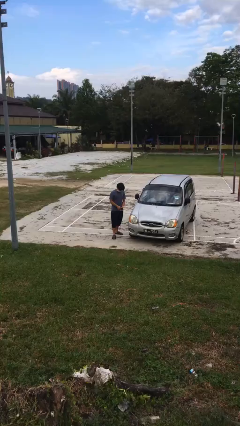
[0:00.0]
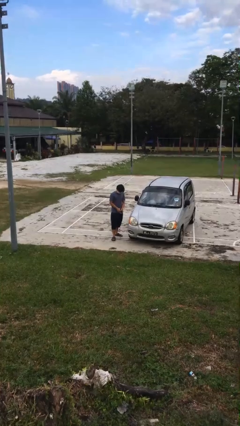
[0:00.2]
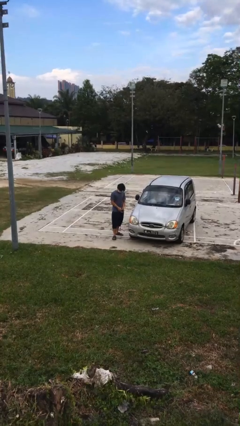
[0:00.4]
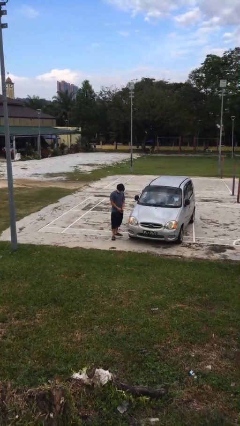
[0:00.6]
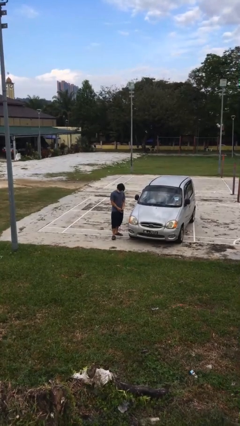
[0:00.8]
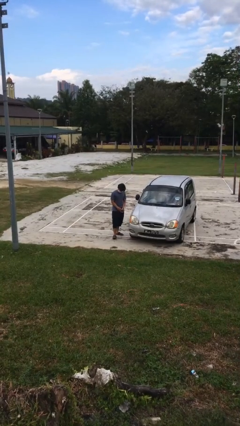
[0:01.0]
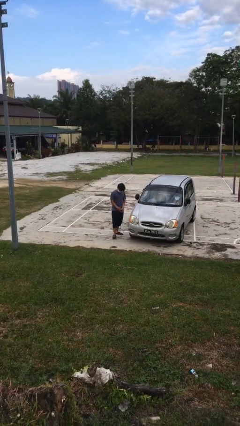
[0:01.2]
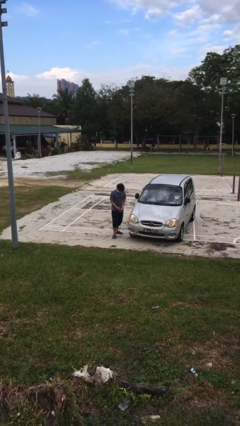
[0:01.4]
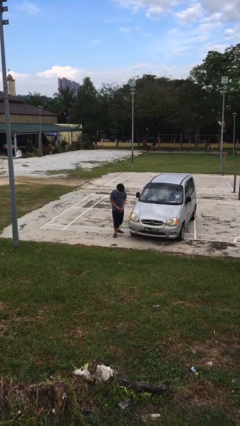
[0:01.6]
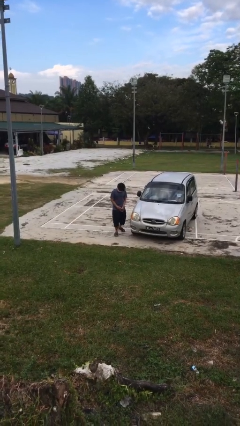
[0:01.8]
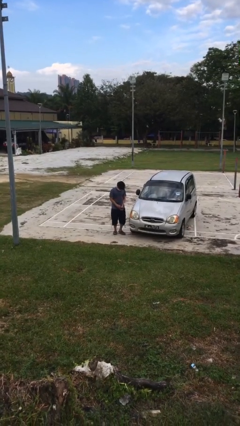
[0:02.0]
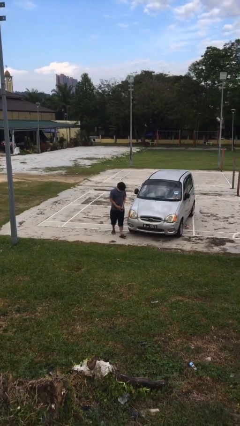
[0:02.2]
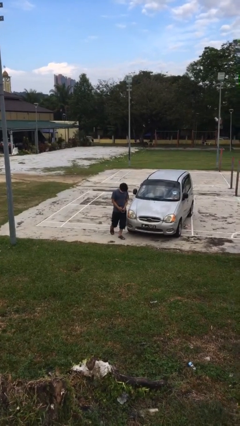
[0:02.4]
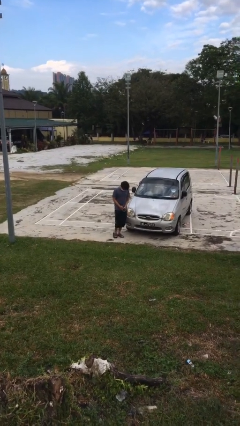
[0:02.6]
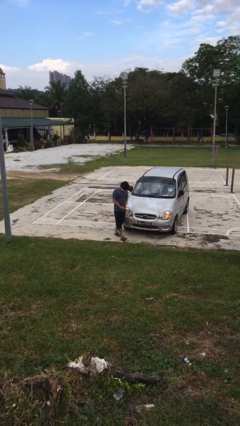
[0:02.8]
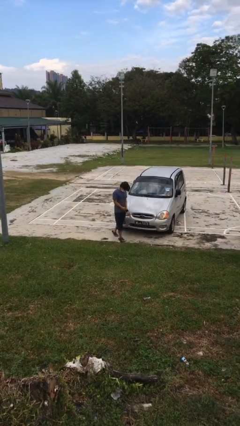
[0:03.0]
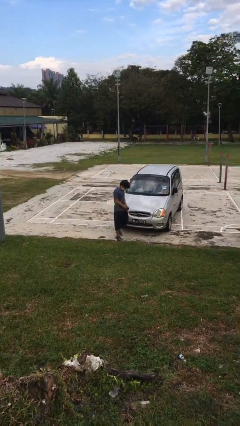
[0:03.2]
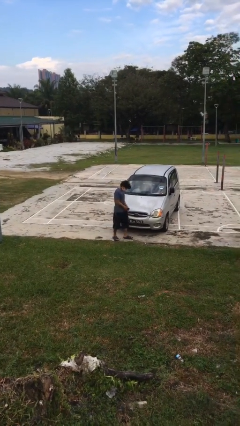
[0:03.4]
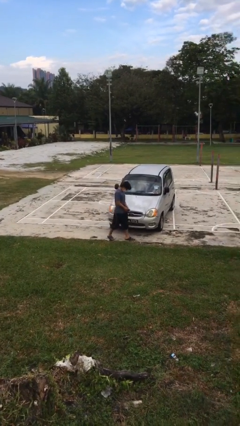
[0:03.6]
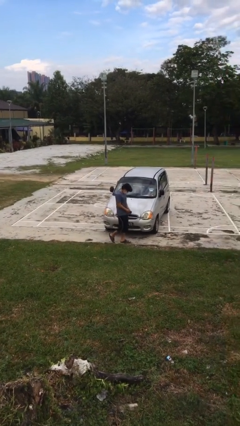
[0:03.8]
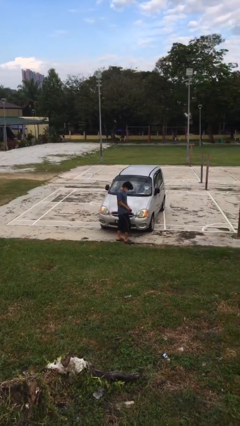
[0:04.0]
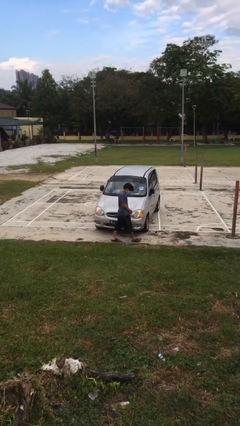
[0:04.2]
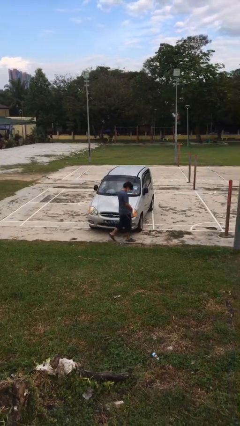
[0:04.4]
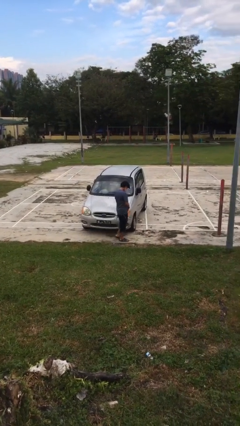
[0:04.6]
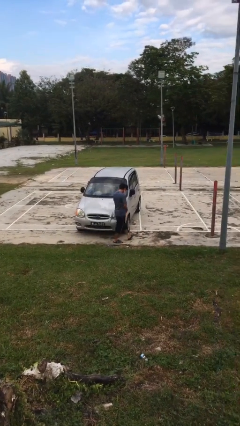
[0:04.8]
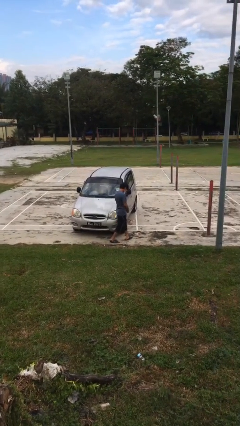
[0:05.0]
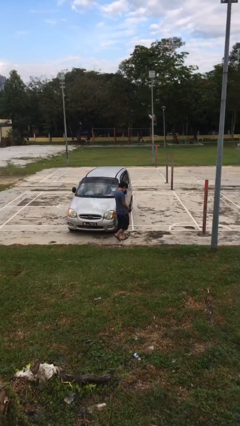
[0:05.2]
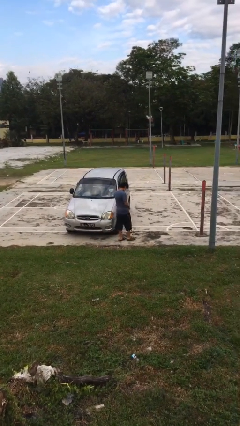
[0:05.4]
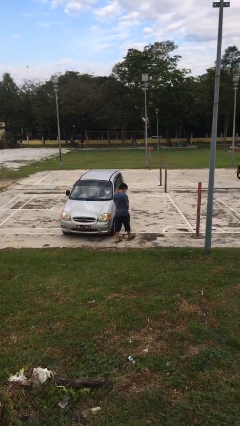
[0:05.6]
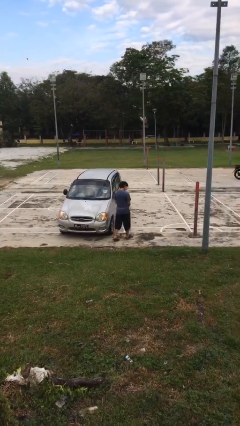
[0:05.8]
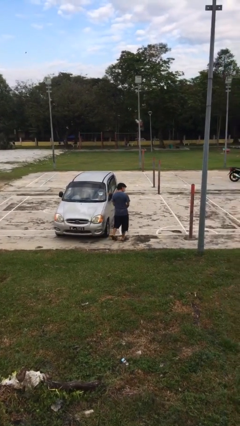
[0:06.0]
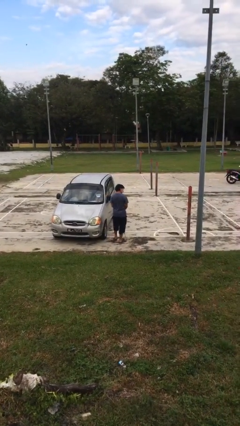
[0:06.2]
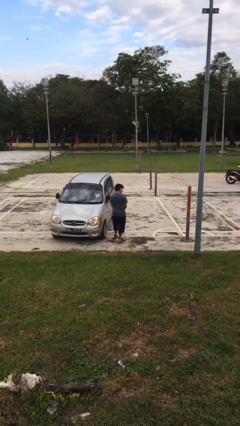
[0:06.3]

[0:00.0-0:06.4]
person walks around car

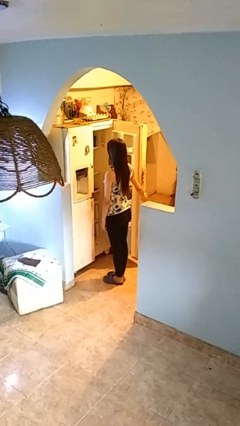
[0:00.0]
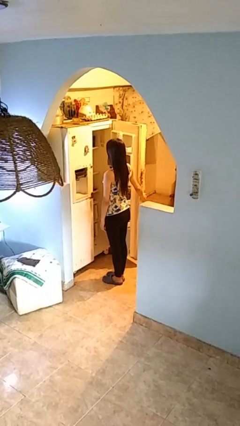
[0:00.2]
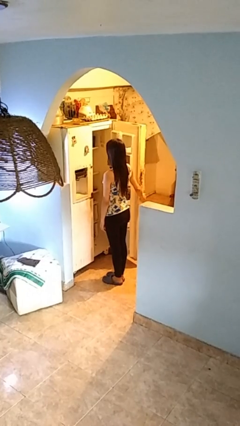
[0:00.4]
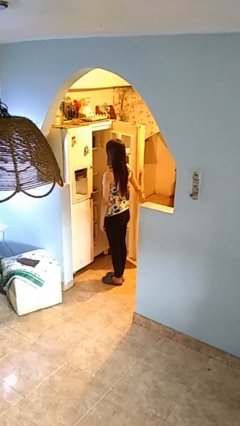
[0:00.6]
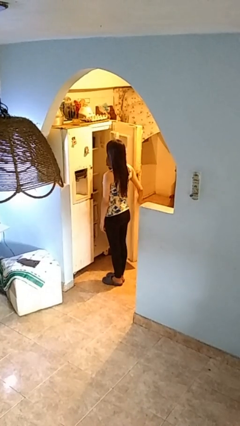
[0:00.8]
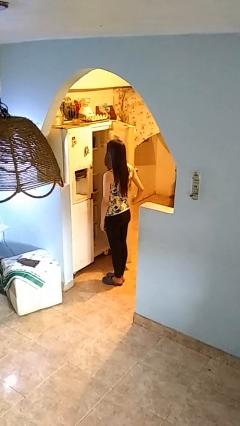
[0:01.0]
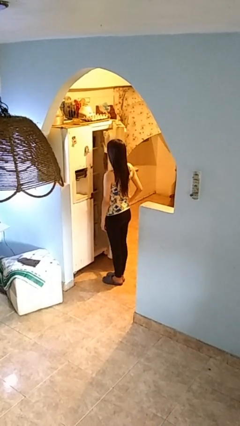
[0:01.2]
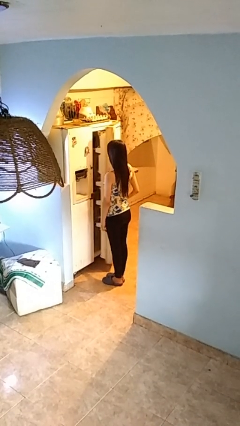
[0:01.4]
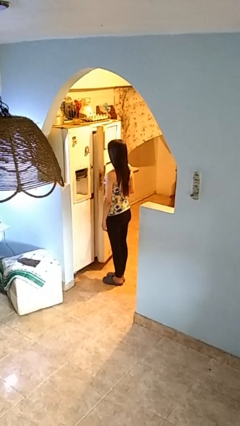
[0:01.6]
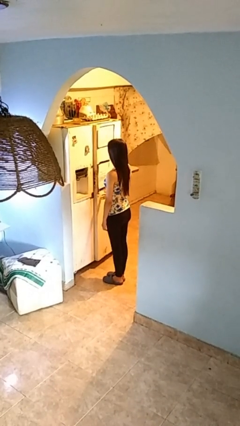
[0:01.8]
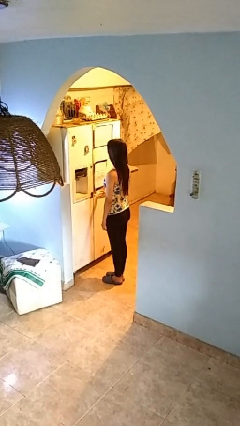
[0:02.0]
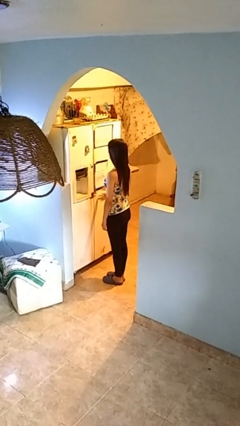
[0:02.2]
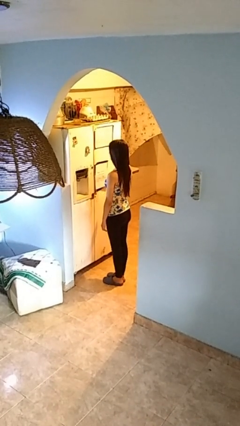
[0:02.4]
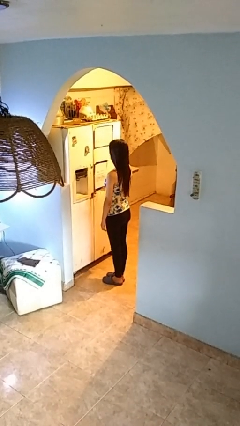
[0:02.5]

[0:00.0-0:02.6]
person closes refrigerator

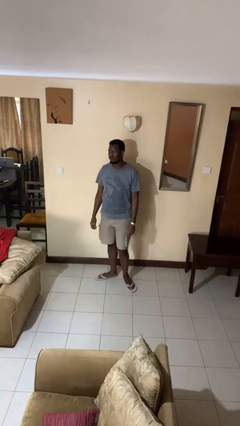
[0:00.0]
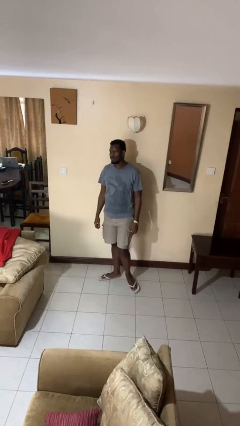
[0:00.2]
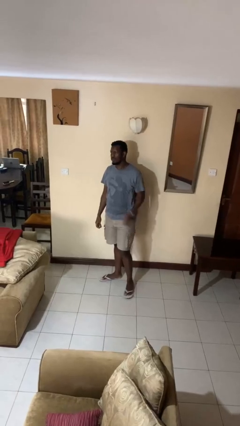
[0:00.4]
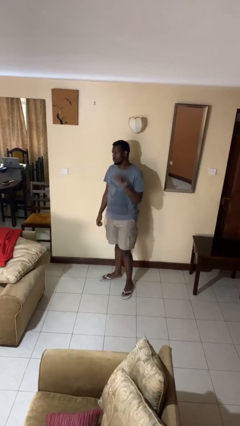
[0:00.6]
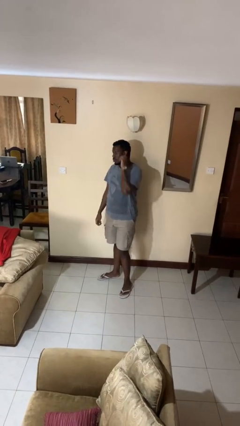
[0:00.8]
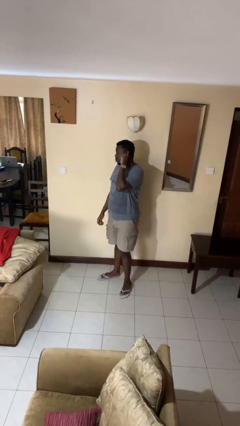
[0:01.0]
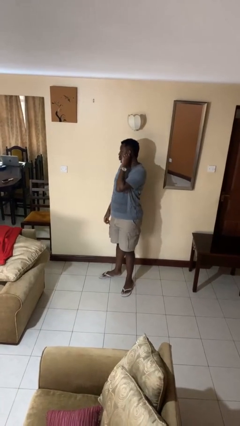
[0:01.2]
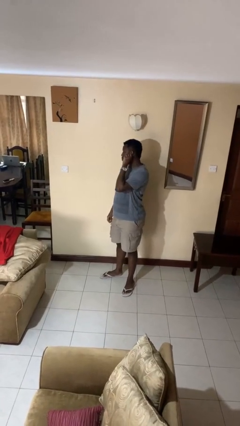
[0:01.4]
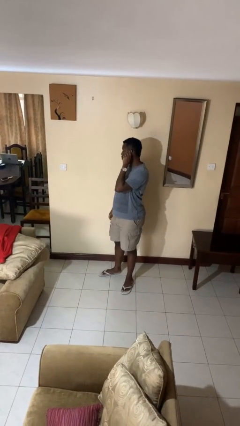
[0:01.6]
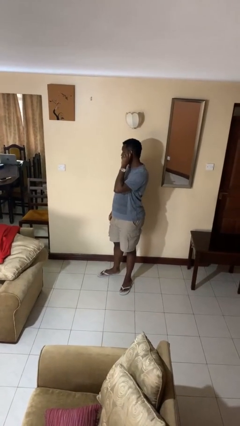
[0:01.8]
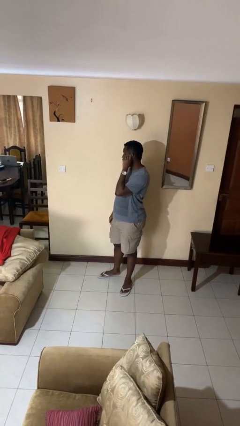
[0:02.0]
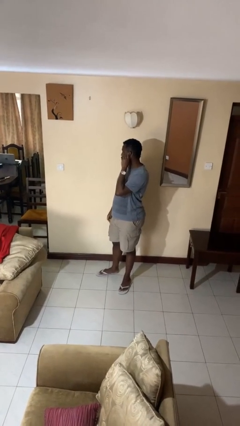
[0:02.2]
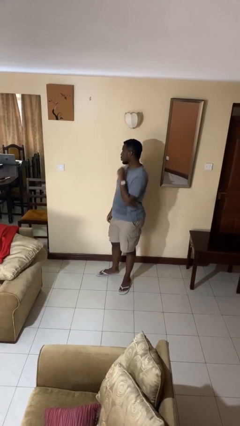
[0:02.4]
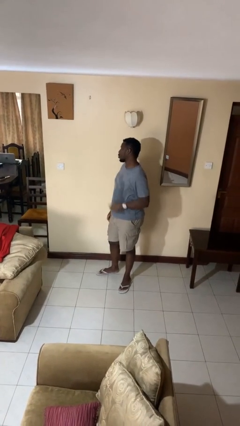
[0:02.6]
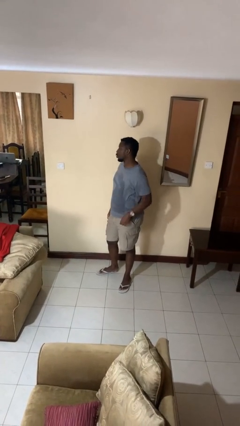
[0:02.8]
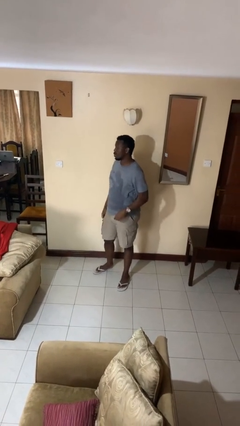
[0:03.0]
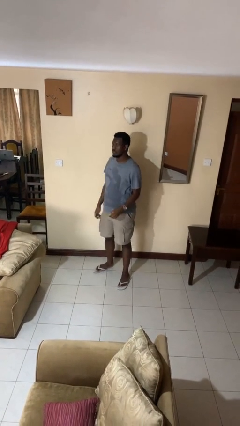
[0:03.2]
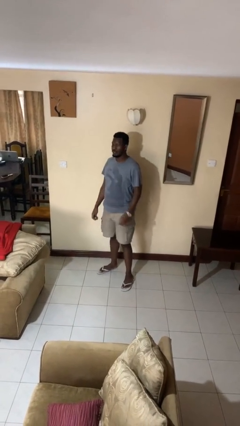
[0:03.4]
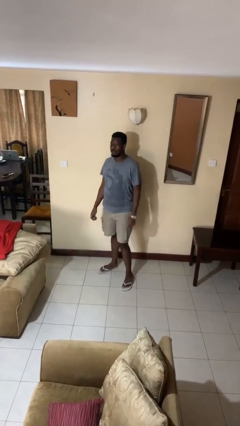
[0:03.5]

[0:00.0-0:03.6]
person touches earlobe

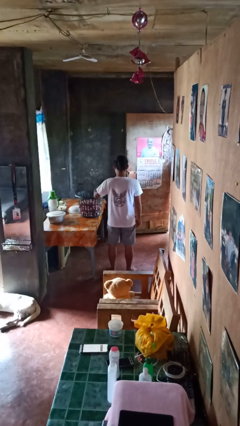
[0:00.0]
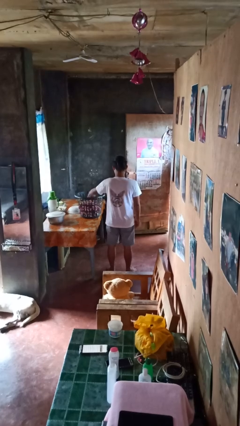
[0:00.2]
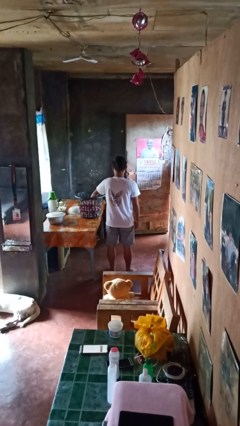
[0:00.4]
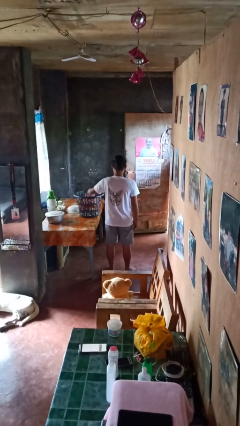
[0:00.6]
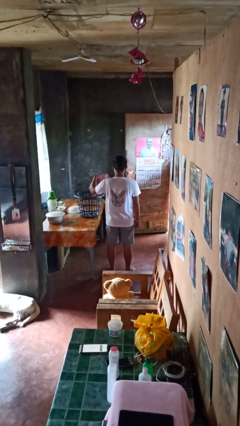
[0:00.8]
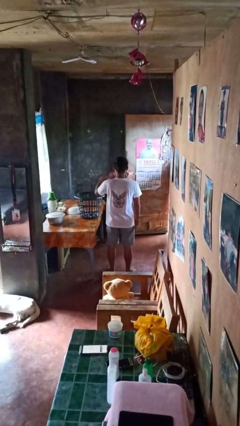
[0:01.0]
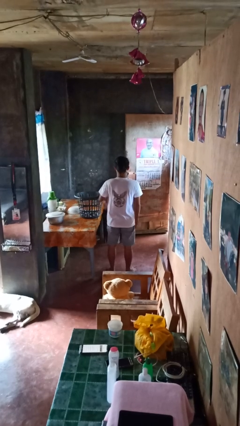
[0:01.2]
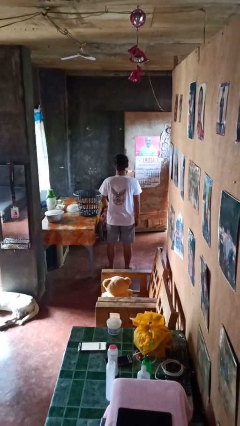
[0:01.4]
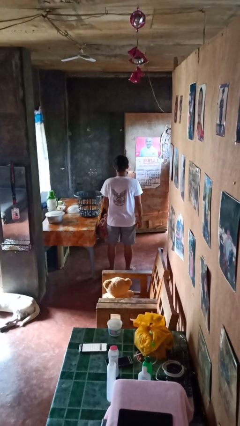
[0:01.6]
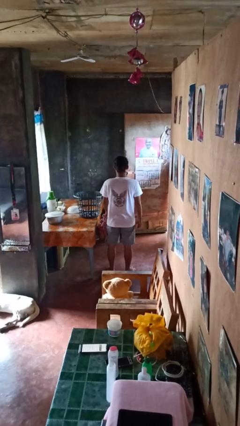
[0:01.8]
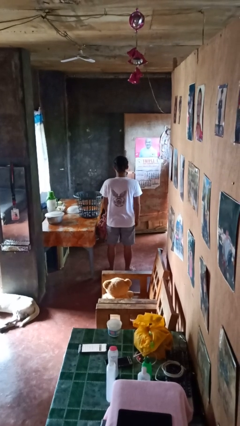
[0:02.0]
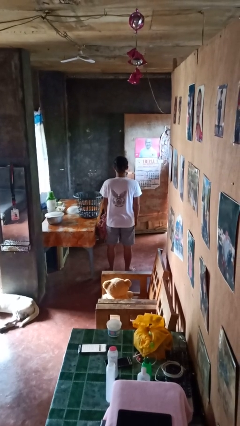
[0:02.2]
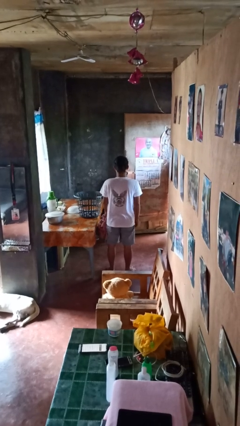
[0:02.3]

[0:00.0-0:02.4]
person takes object from basket

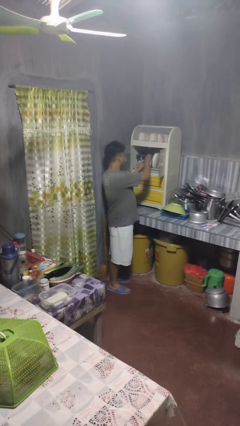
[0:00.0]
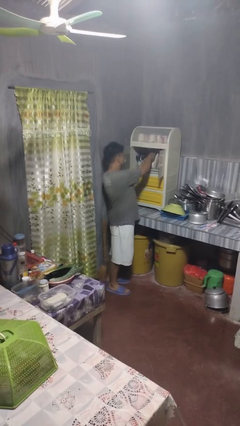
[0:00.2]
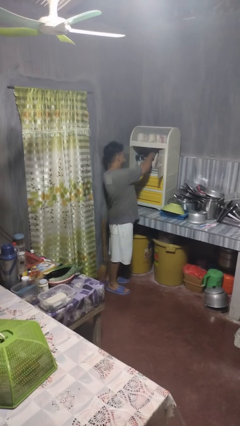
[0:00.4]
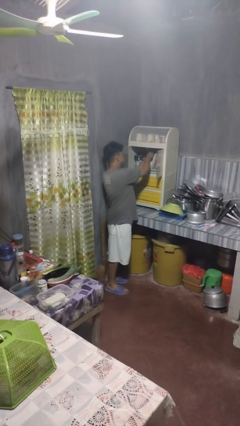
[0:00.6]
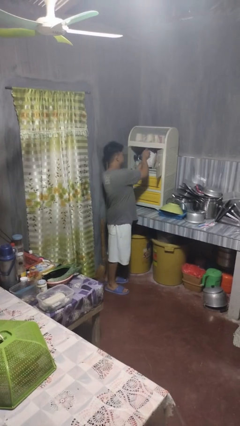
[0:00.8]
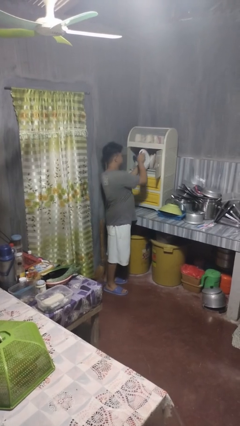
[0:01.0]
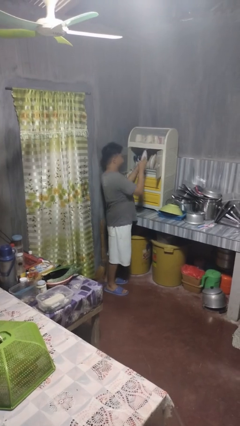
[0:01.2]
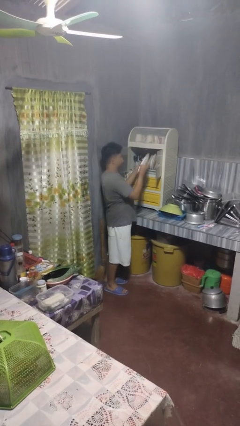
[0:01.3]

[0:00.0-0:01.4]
person takes object from cabinet

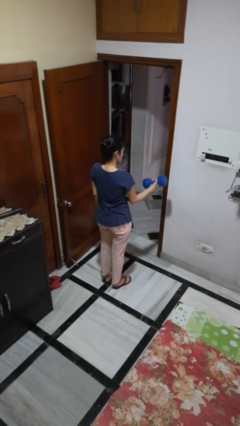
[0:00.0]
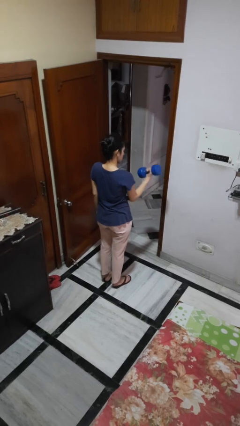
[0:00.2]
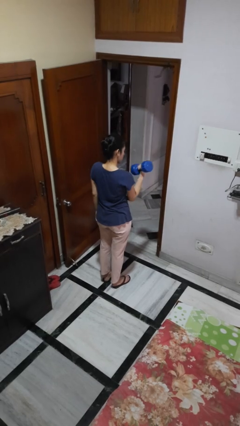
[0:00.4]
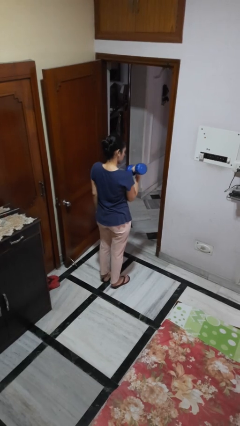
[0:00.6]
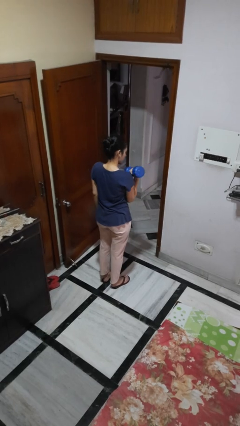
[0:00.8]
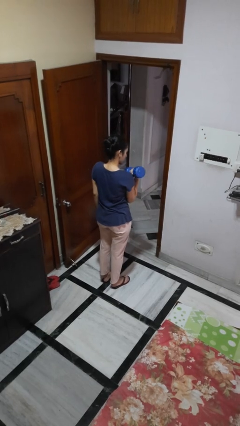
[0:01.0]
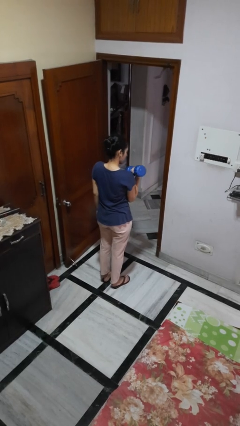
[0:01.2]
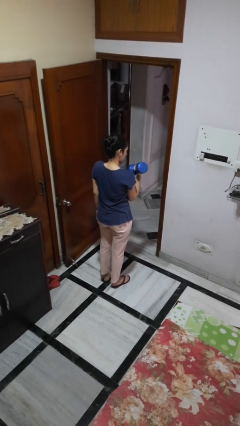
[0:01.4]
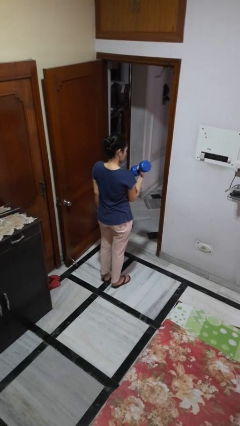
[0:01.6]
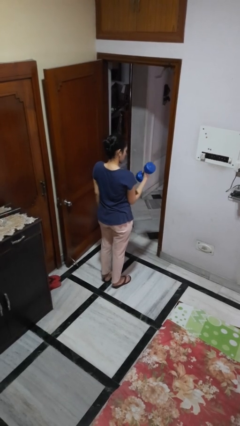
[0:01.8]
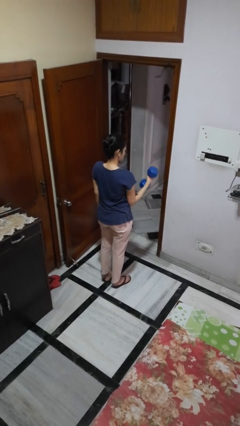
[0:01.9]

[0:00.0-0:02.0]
person lifts dumbbells
